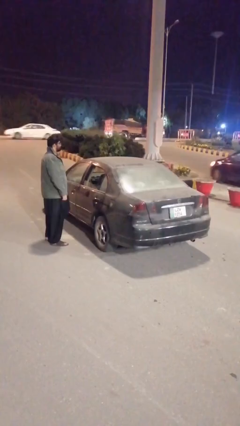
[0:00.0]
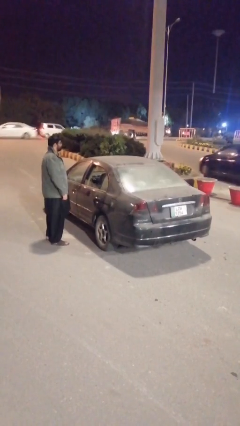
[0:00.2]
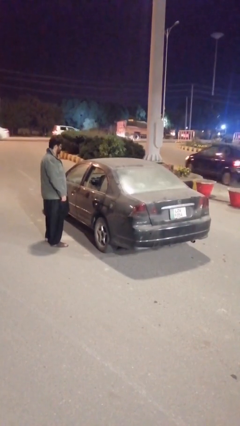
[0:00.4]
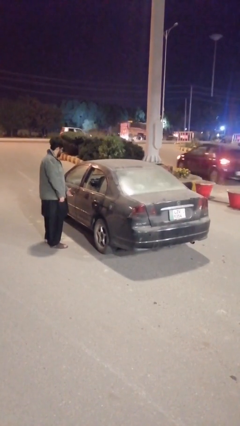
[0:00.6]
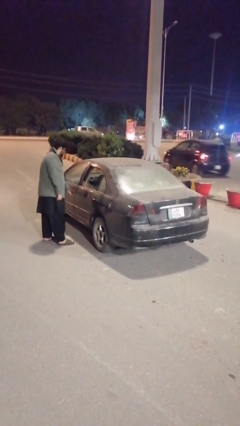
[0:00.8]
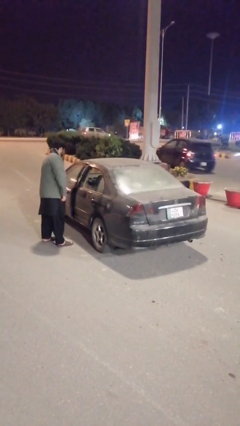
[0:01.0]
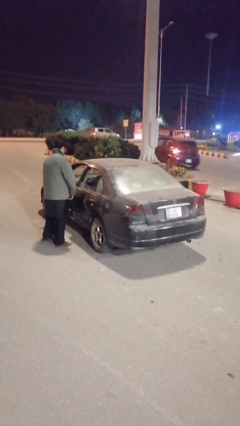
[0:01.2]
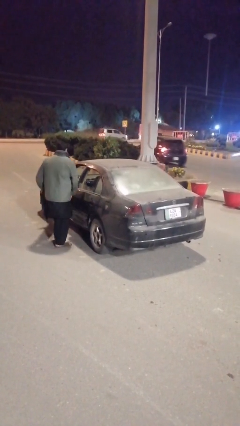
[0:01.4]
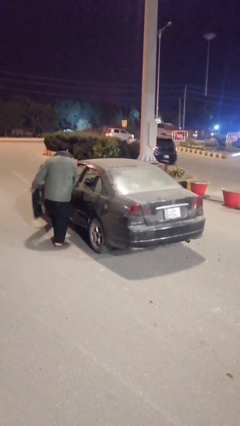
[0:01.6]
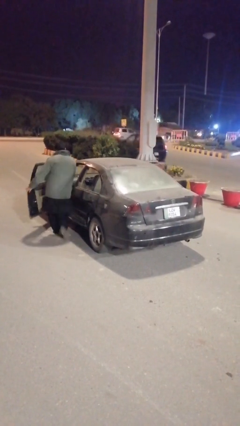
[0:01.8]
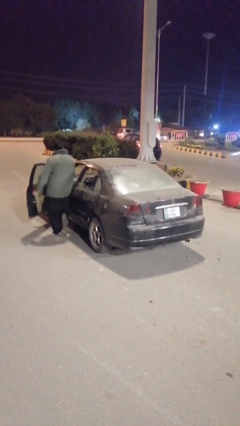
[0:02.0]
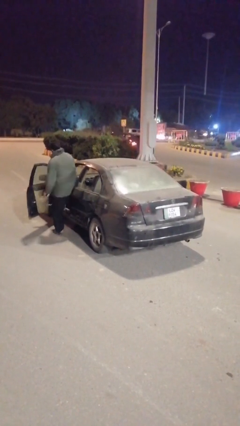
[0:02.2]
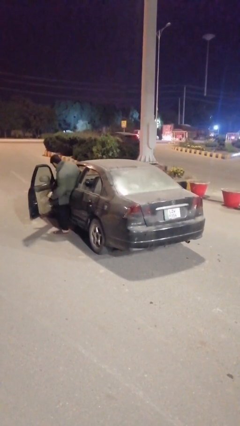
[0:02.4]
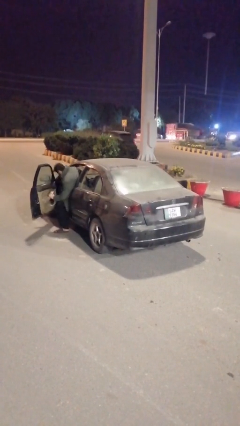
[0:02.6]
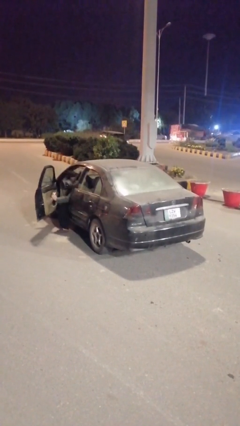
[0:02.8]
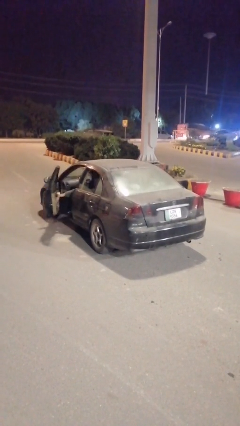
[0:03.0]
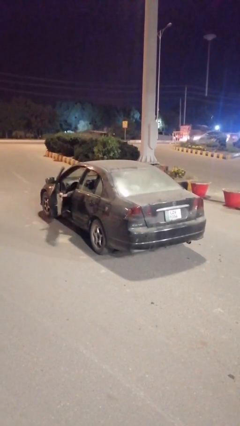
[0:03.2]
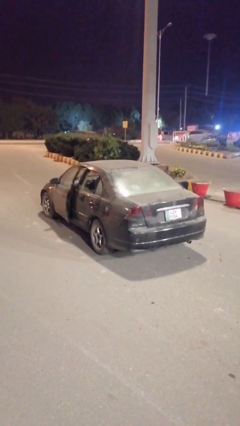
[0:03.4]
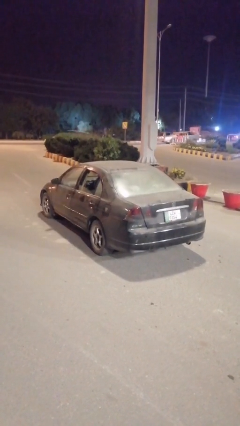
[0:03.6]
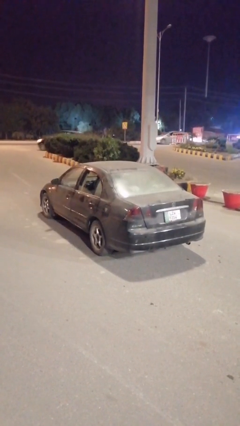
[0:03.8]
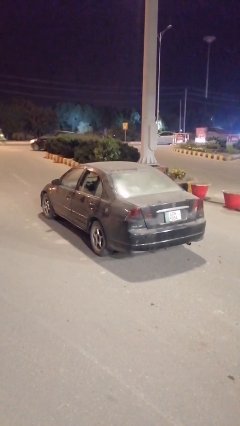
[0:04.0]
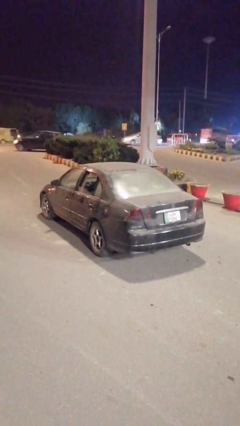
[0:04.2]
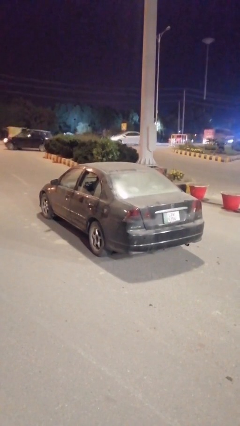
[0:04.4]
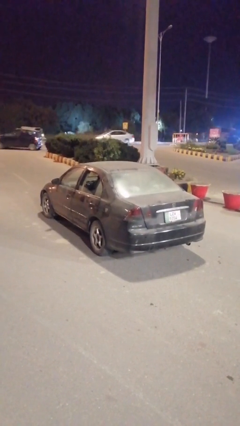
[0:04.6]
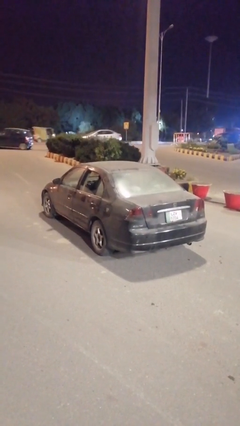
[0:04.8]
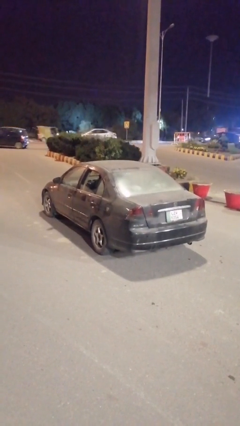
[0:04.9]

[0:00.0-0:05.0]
car picks up person

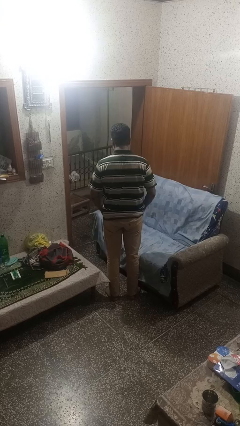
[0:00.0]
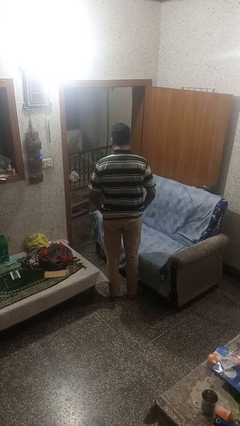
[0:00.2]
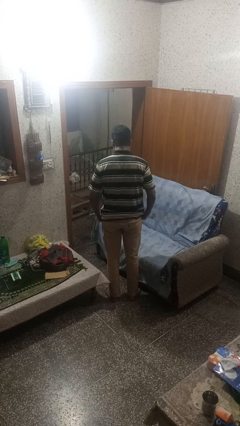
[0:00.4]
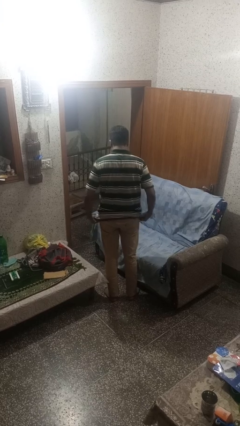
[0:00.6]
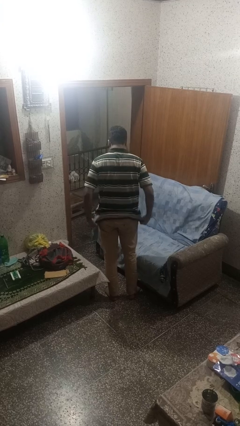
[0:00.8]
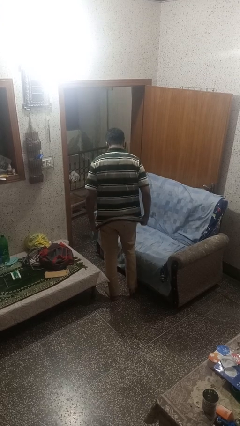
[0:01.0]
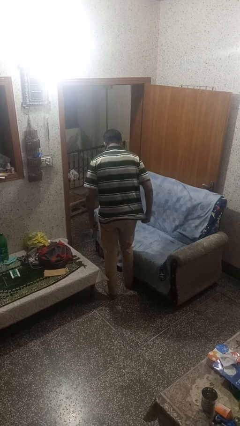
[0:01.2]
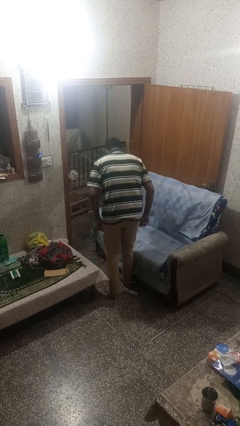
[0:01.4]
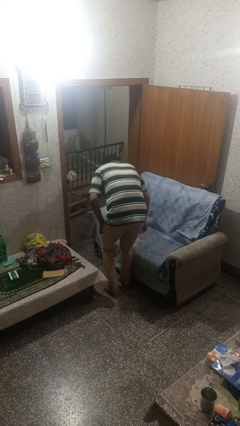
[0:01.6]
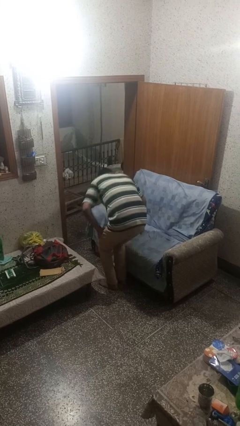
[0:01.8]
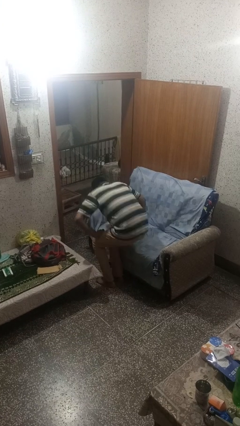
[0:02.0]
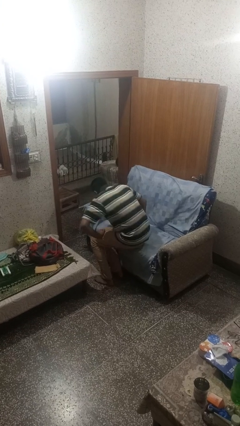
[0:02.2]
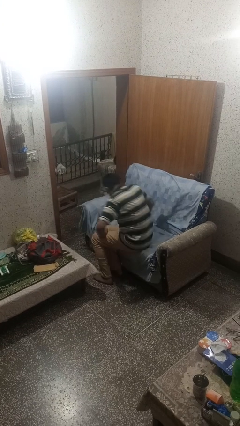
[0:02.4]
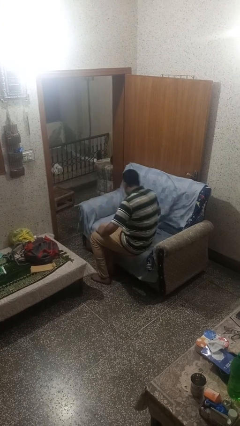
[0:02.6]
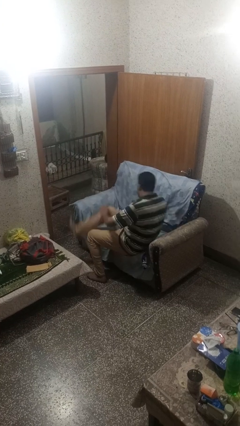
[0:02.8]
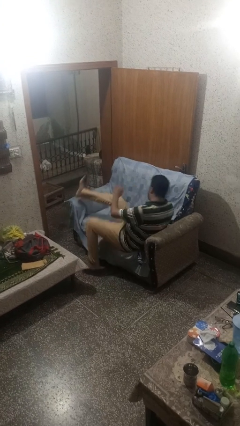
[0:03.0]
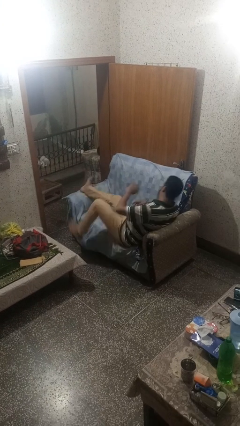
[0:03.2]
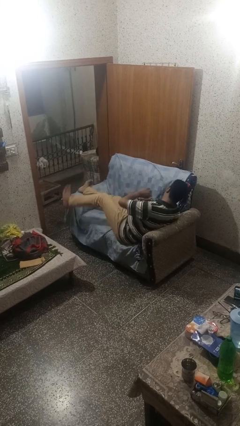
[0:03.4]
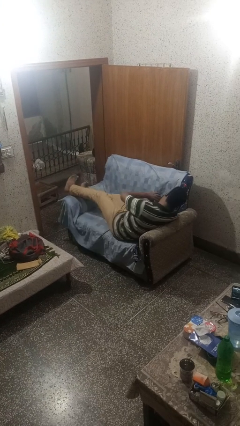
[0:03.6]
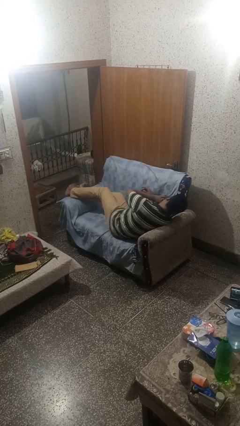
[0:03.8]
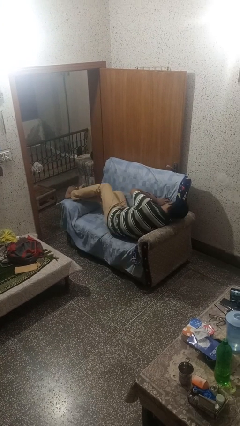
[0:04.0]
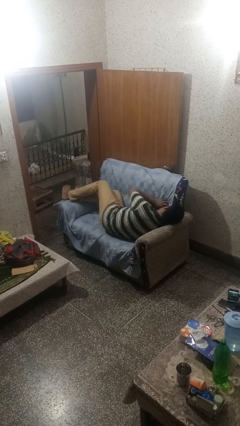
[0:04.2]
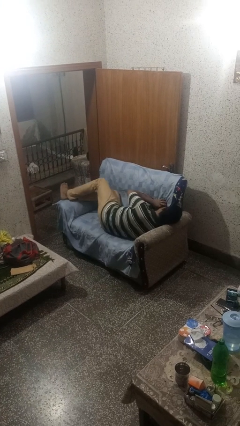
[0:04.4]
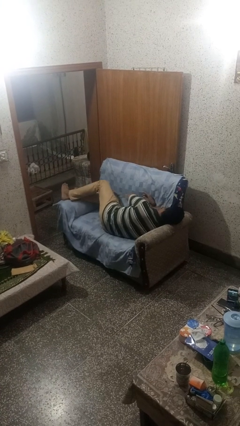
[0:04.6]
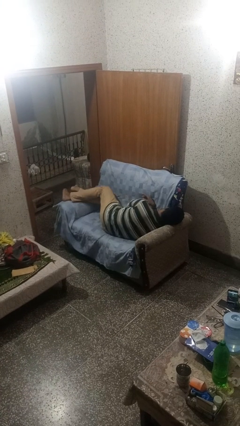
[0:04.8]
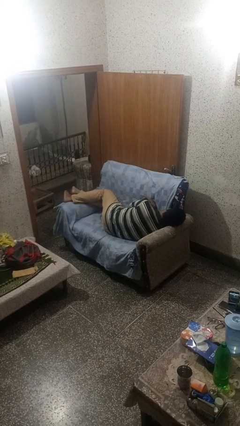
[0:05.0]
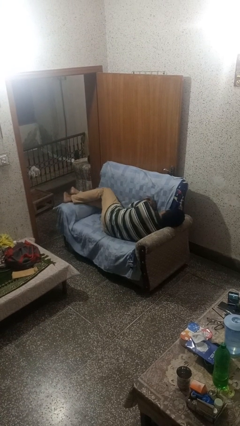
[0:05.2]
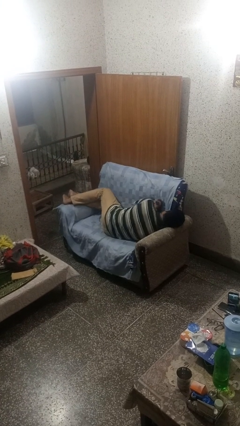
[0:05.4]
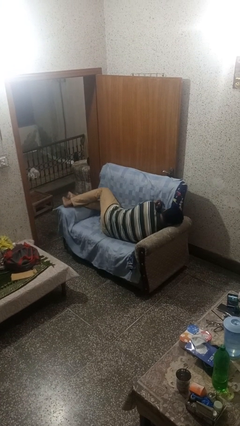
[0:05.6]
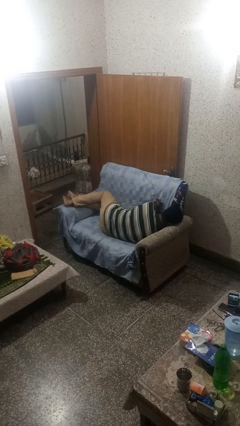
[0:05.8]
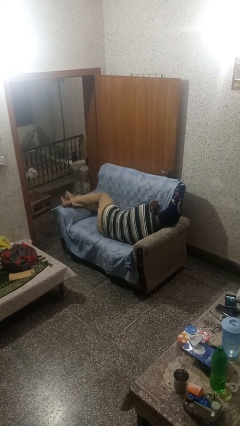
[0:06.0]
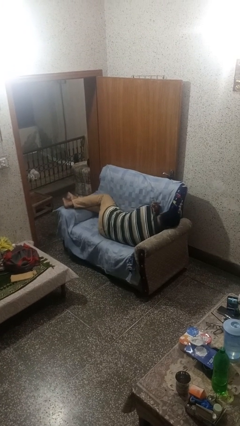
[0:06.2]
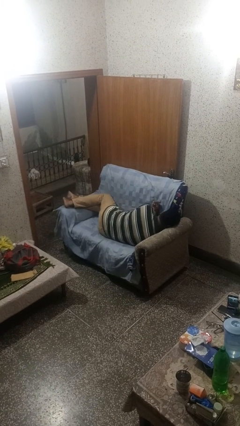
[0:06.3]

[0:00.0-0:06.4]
person lies down on couch

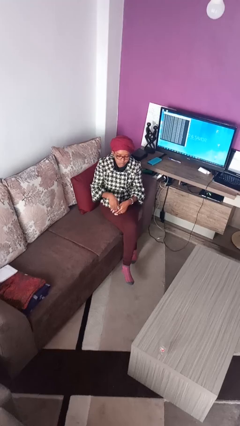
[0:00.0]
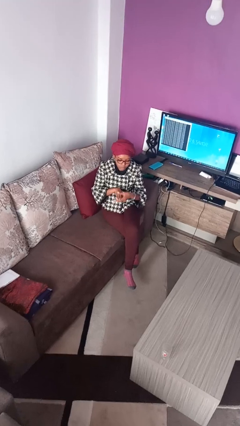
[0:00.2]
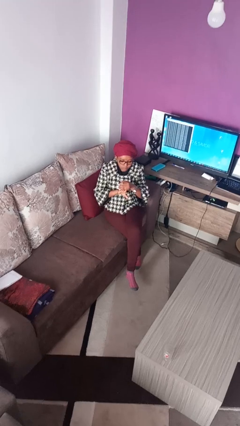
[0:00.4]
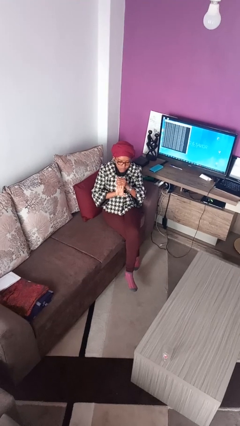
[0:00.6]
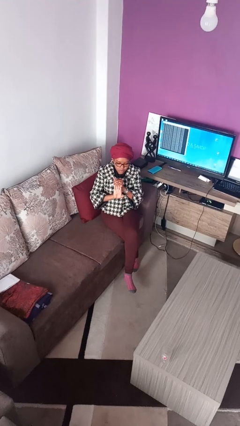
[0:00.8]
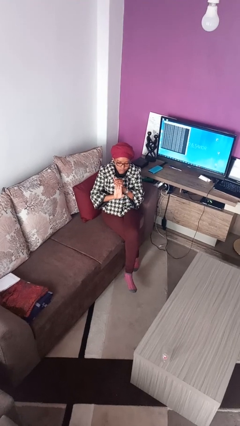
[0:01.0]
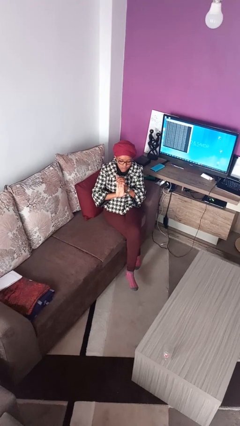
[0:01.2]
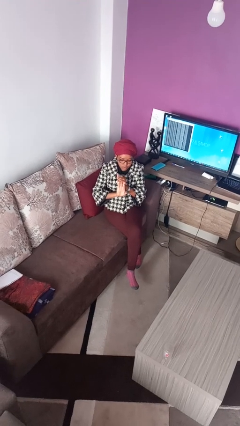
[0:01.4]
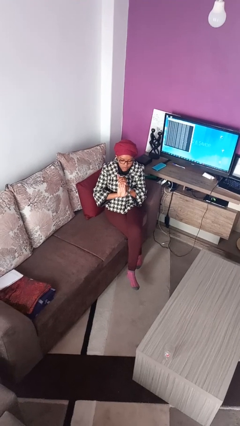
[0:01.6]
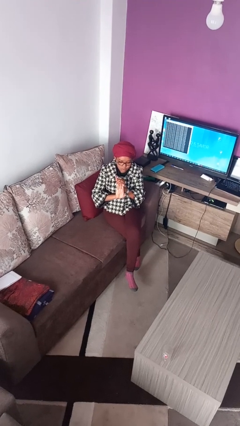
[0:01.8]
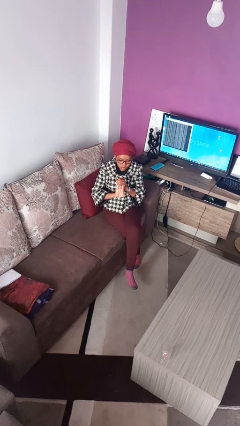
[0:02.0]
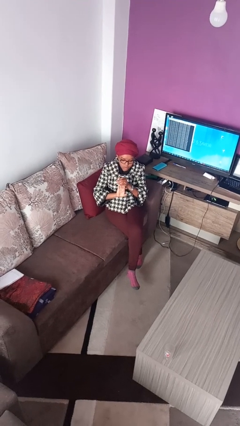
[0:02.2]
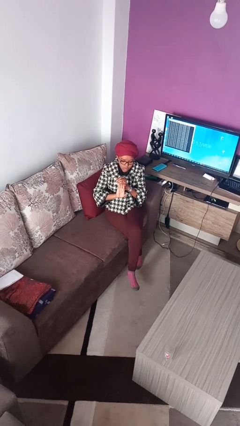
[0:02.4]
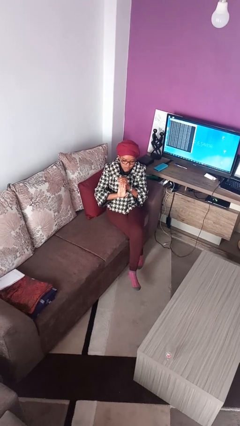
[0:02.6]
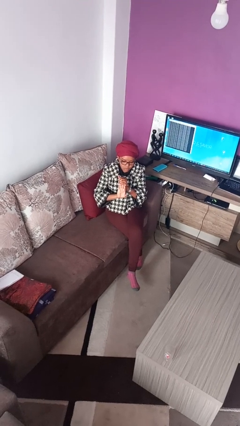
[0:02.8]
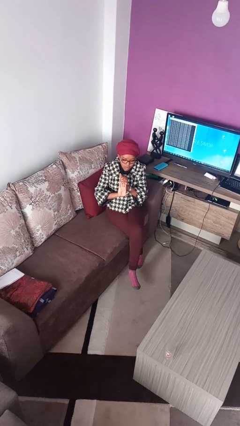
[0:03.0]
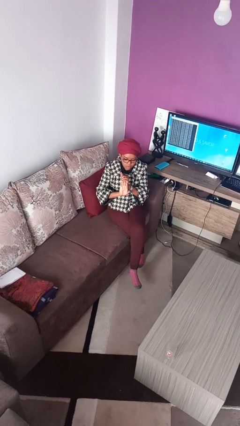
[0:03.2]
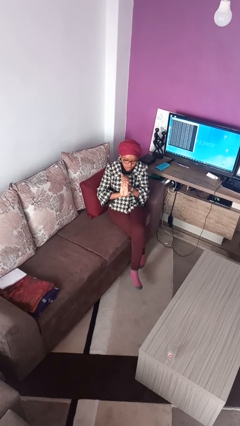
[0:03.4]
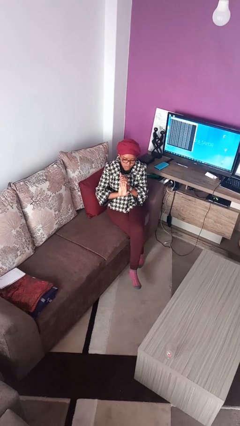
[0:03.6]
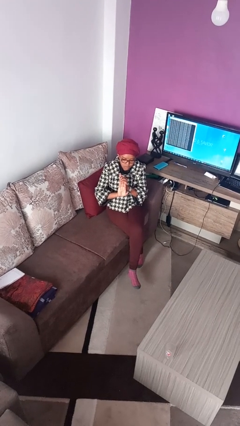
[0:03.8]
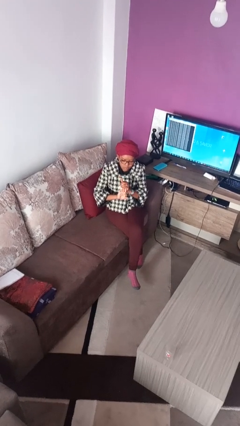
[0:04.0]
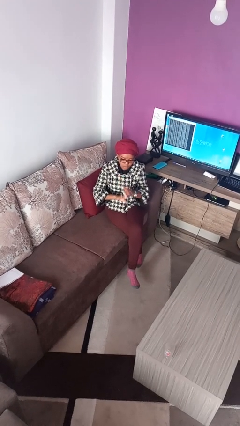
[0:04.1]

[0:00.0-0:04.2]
person cracks knuckles

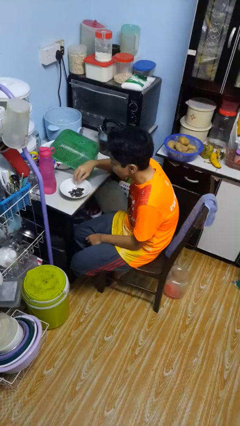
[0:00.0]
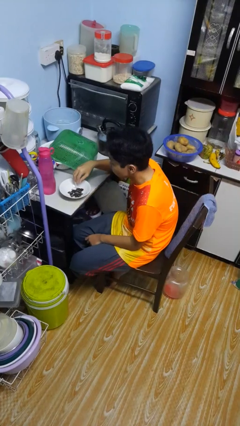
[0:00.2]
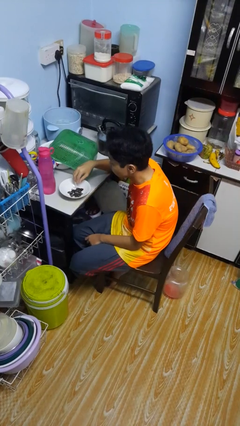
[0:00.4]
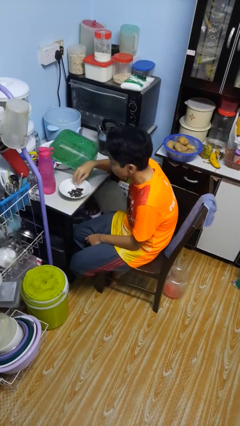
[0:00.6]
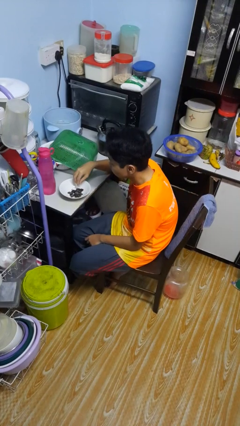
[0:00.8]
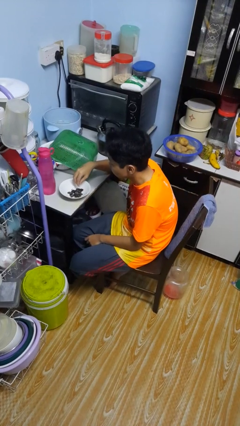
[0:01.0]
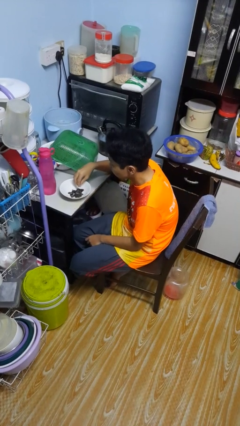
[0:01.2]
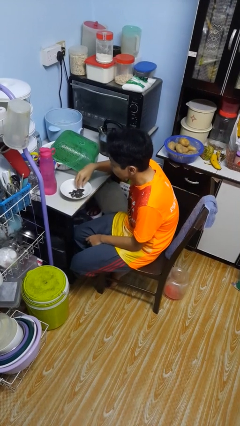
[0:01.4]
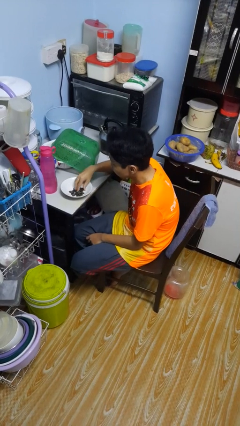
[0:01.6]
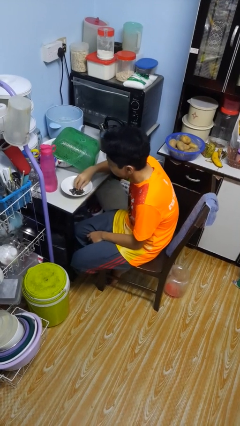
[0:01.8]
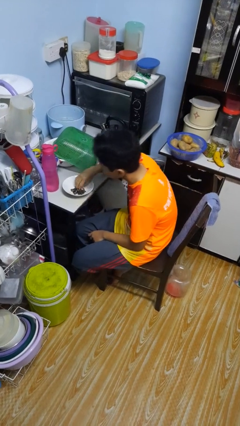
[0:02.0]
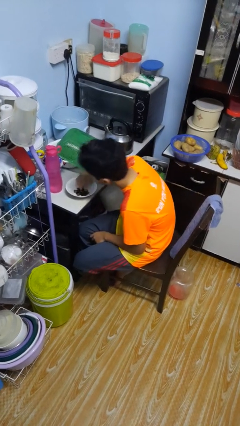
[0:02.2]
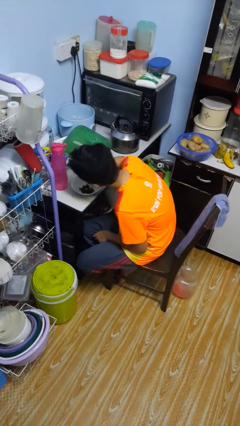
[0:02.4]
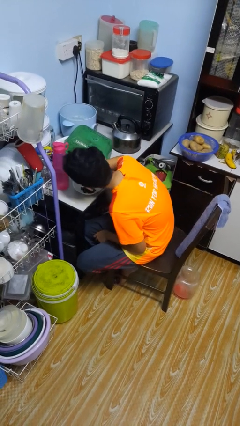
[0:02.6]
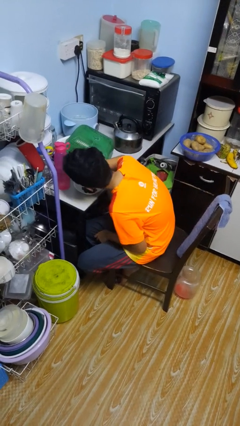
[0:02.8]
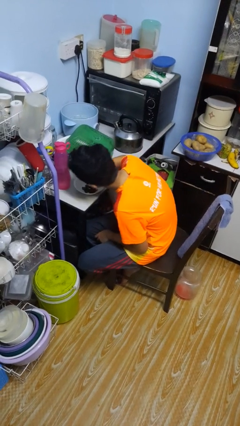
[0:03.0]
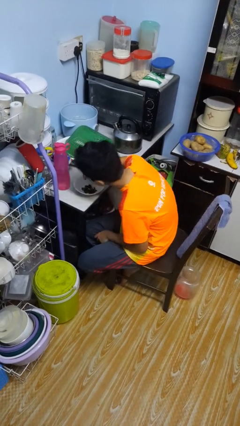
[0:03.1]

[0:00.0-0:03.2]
person eats with hands
